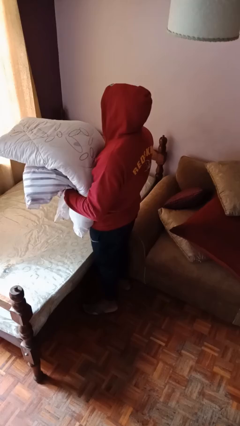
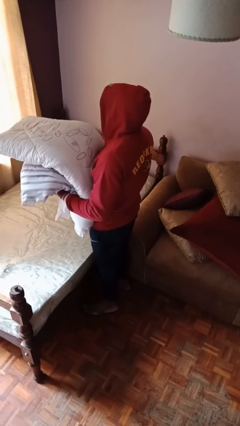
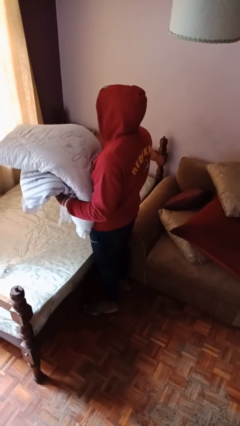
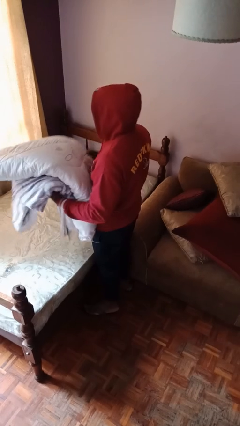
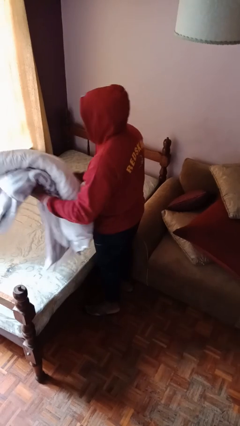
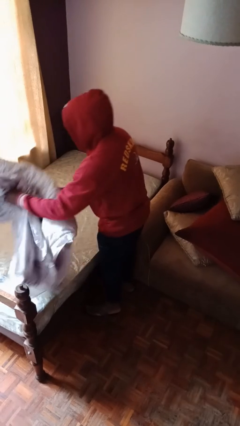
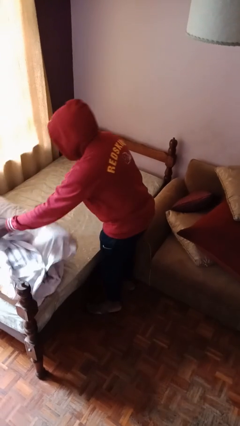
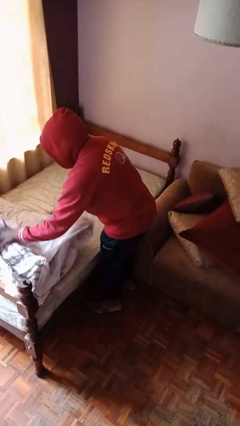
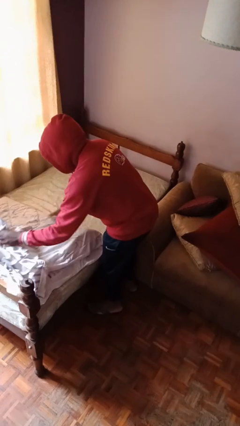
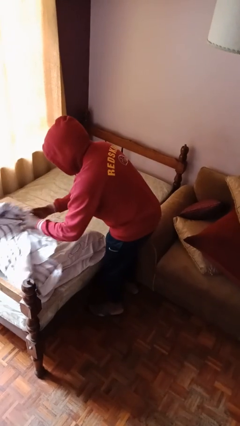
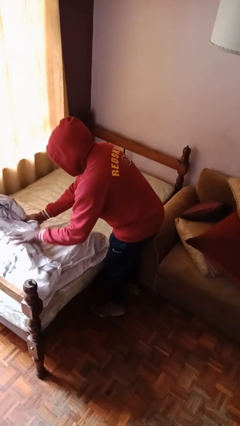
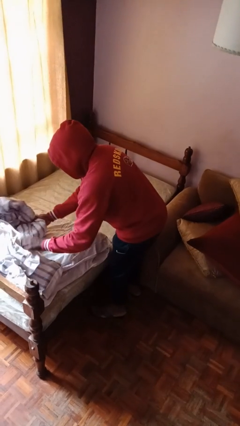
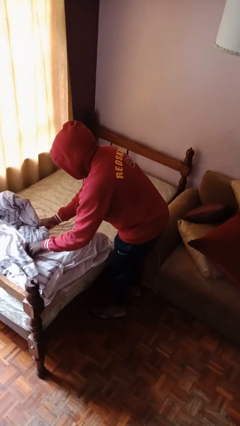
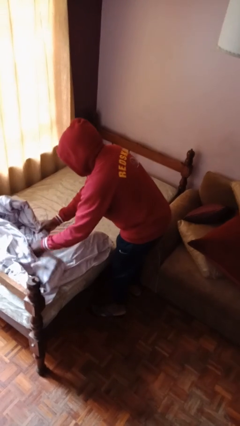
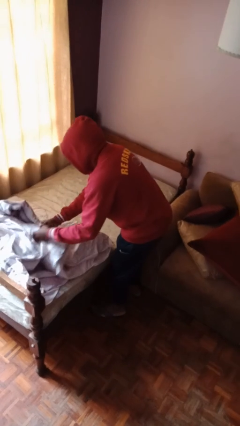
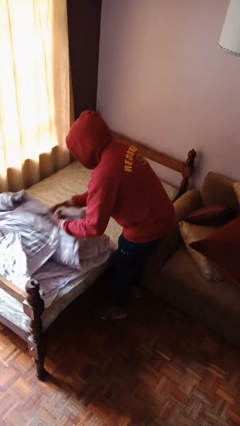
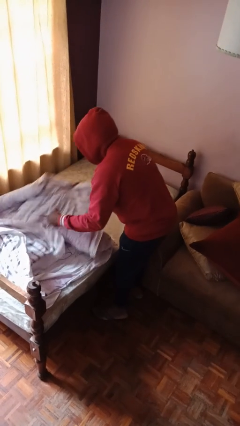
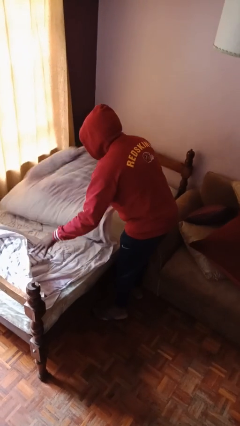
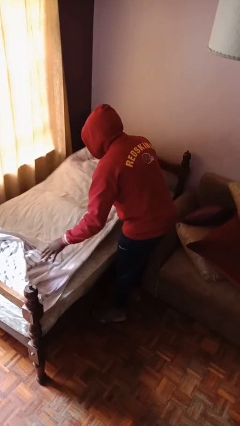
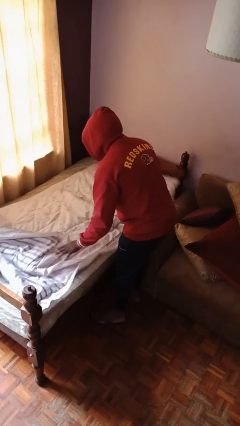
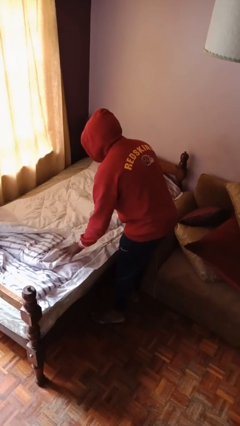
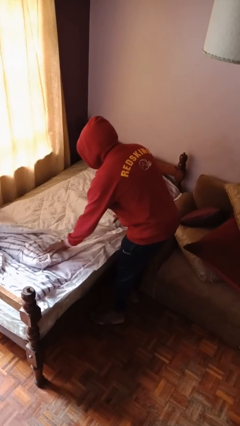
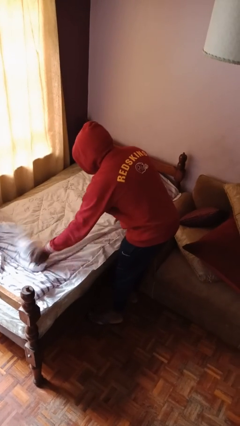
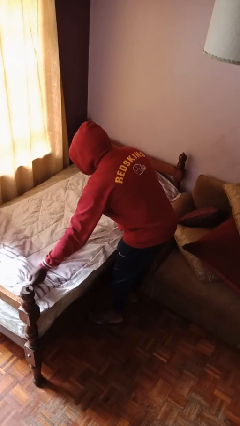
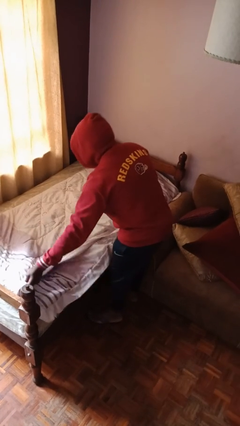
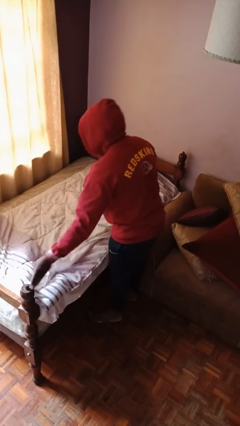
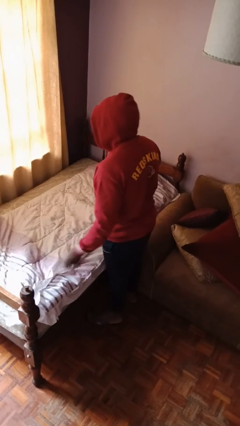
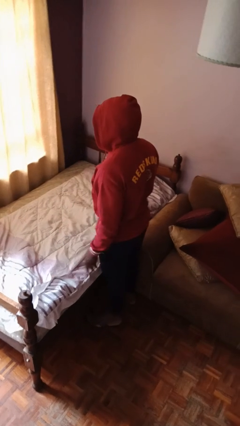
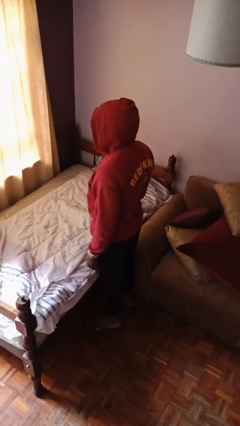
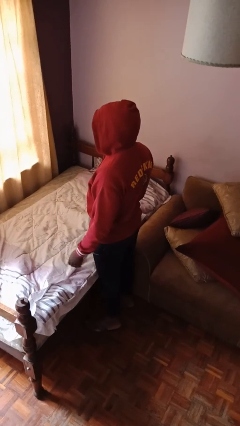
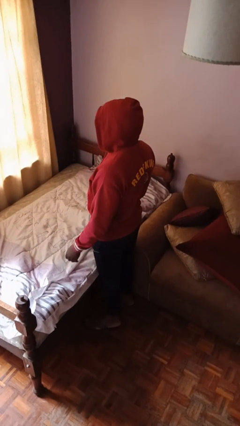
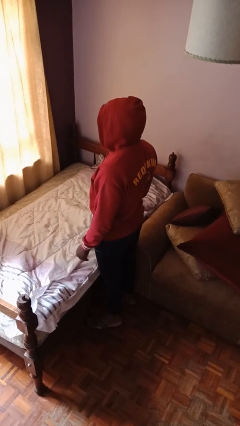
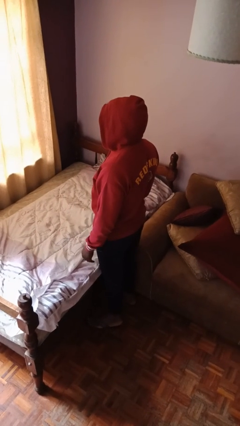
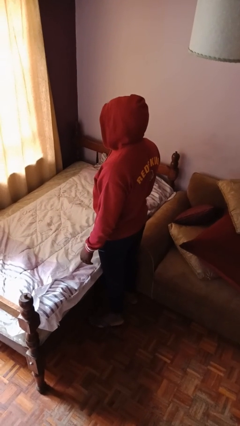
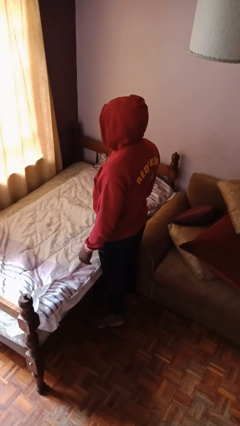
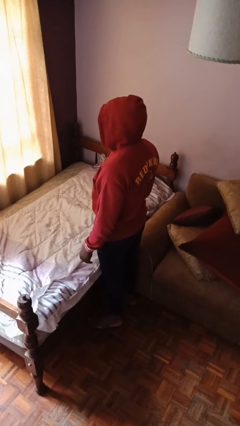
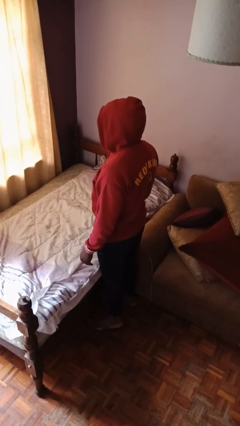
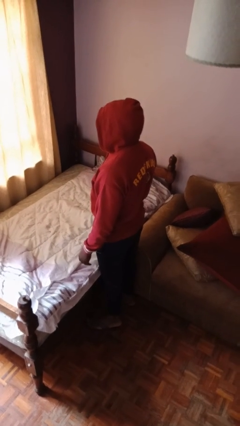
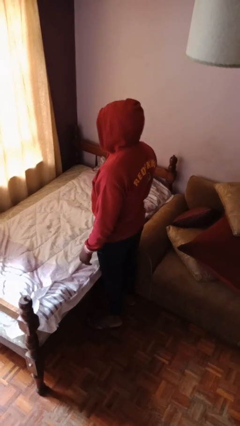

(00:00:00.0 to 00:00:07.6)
person unfolds blanket

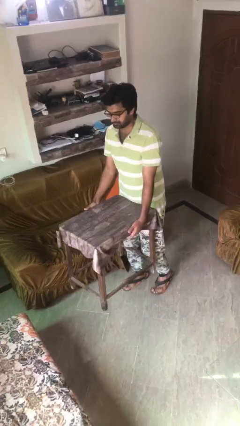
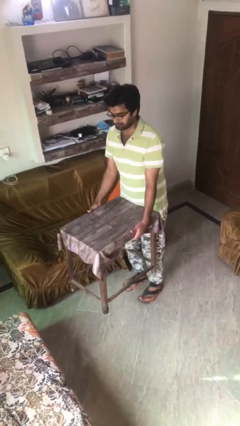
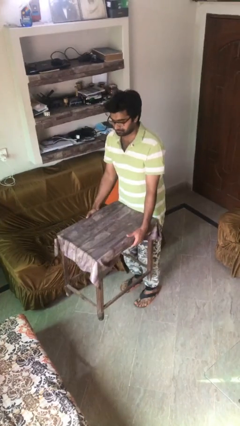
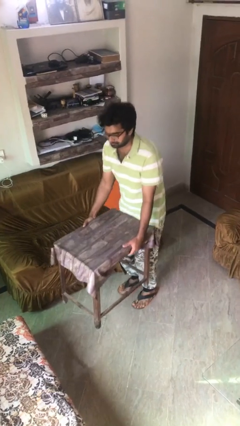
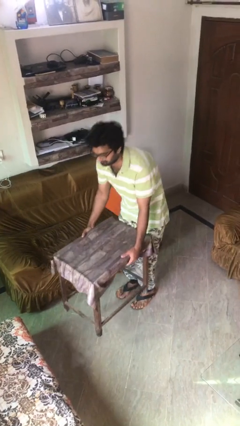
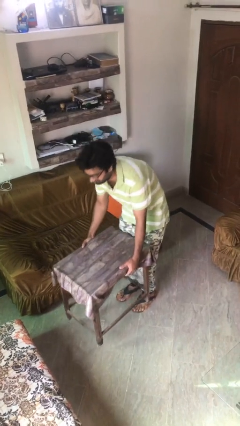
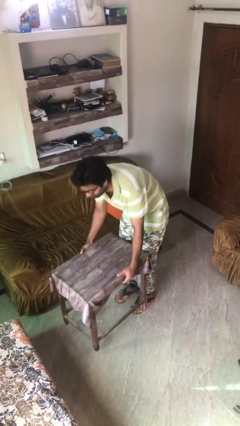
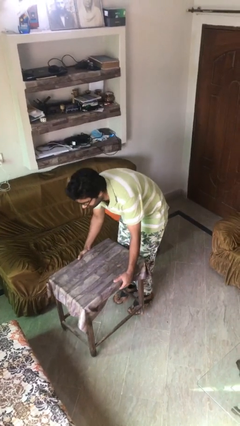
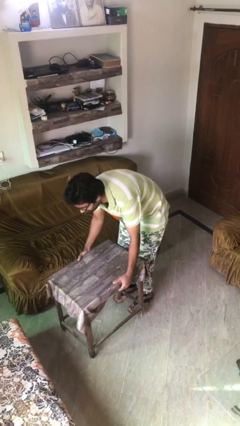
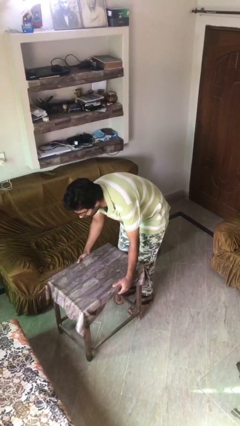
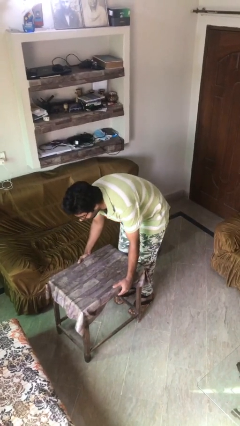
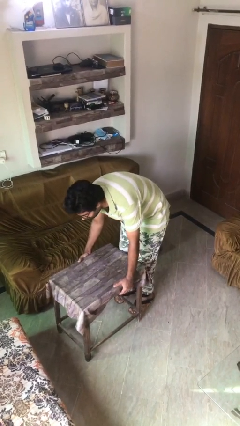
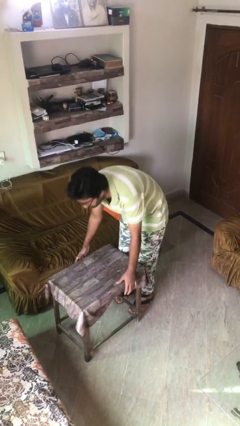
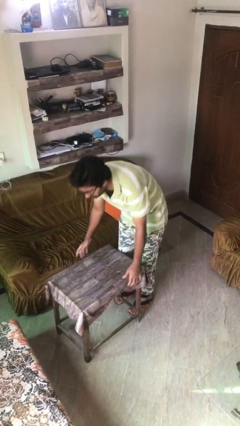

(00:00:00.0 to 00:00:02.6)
person puts down object on floor

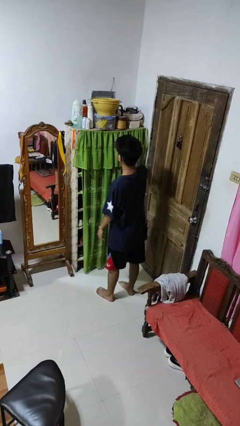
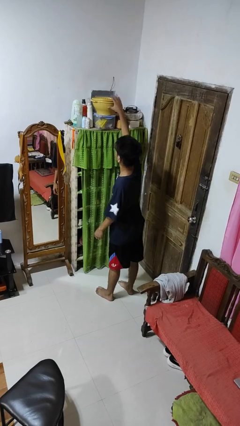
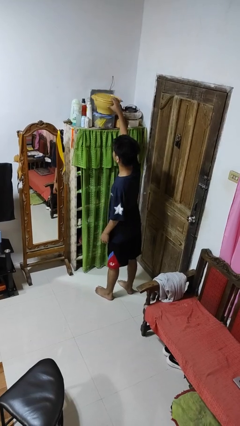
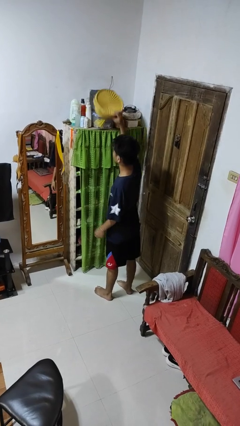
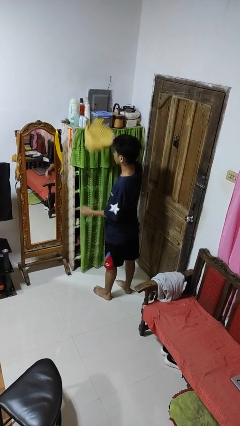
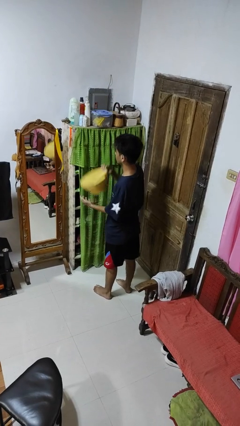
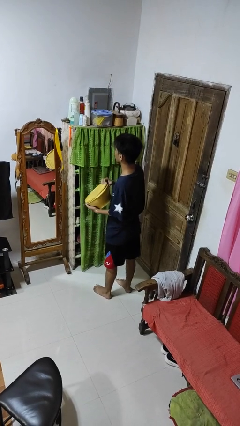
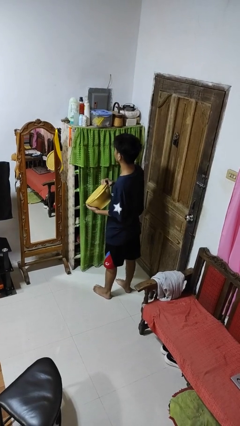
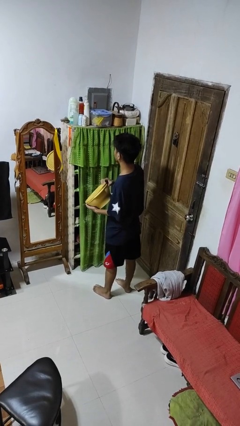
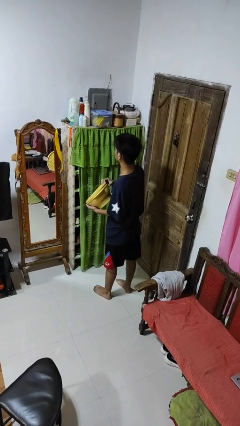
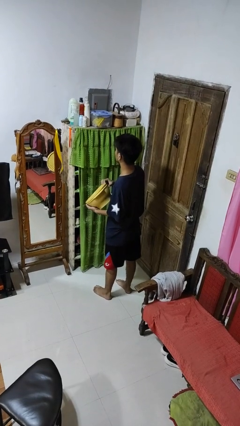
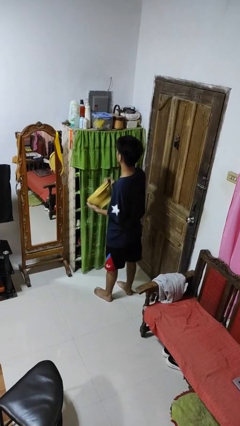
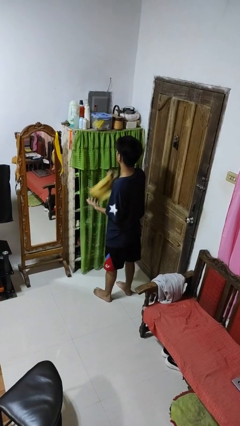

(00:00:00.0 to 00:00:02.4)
person picks up object from shelf

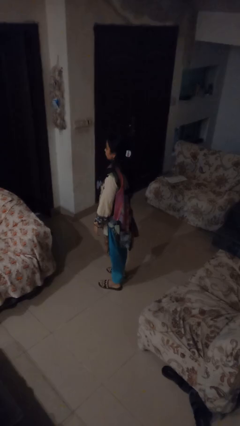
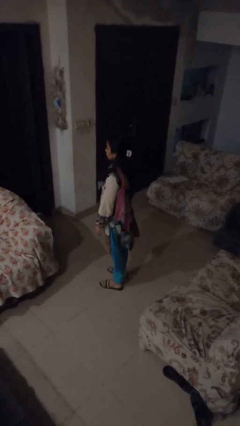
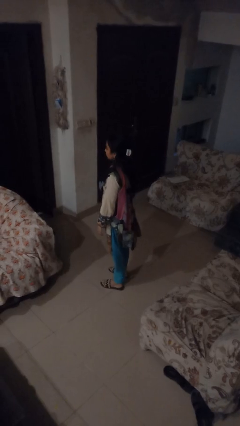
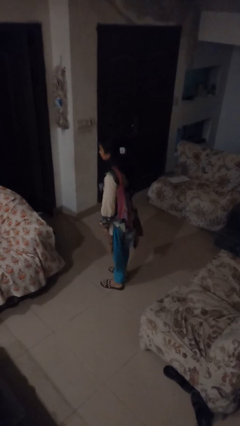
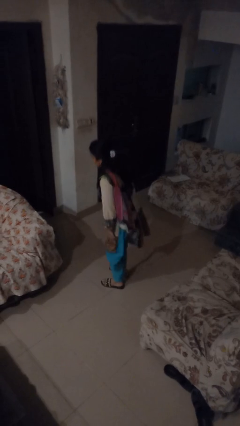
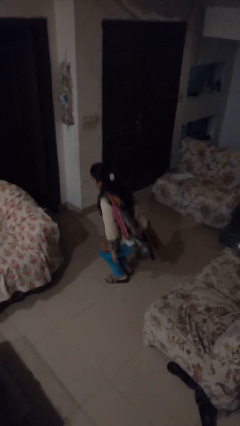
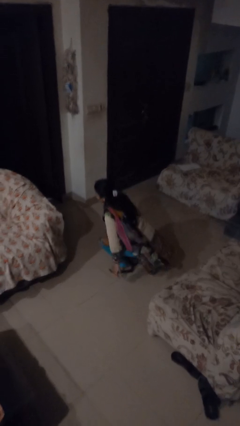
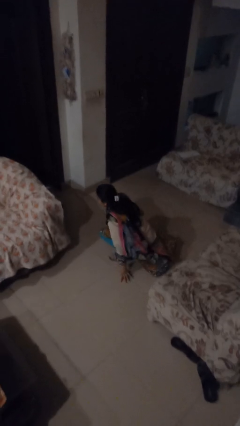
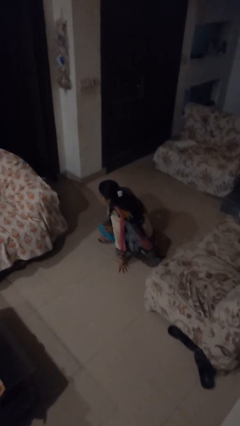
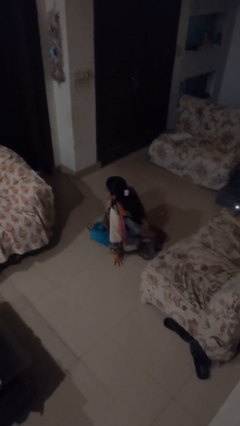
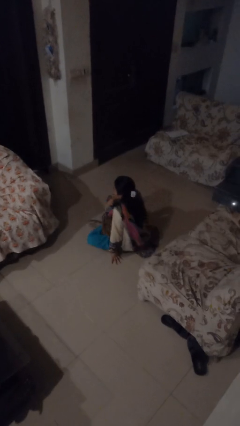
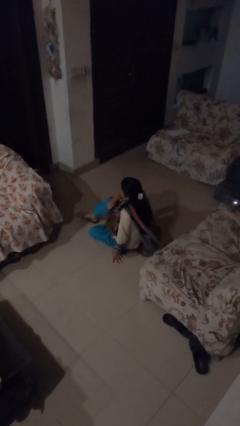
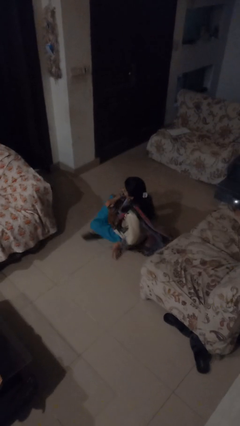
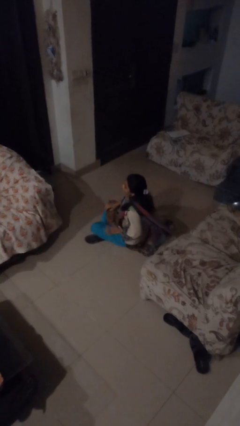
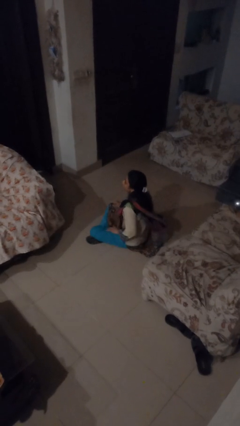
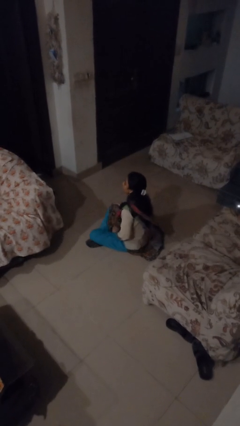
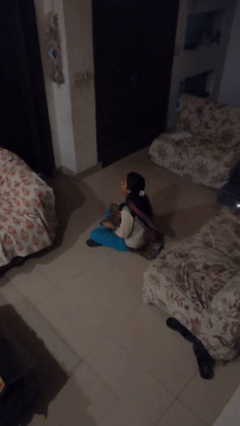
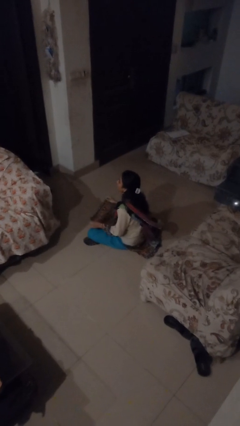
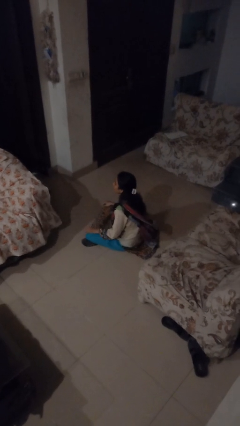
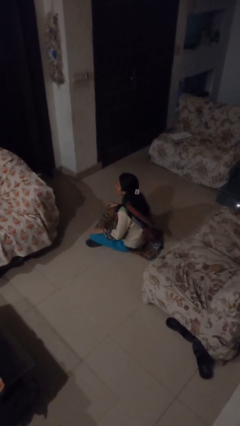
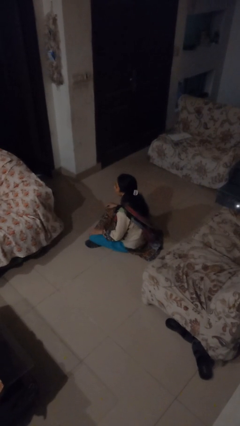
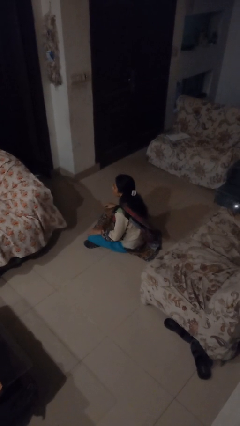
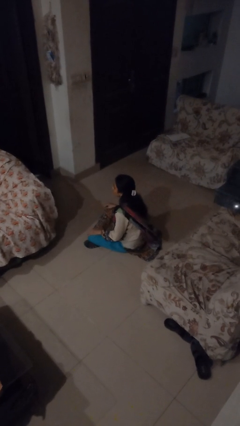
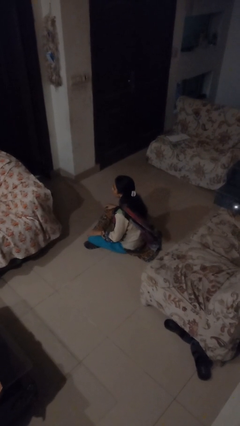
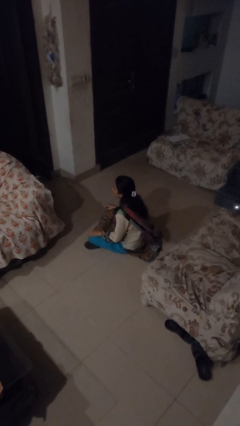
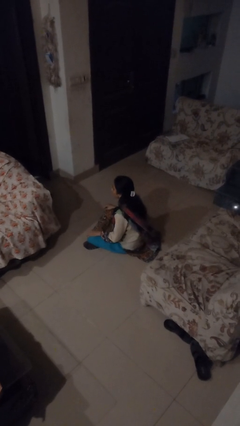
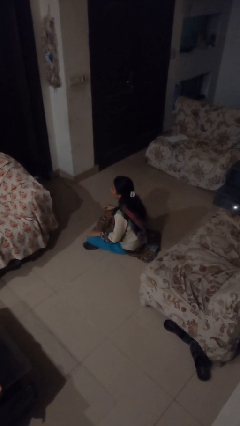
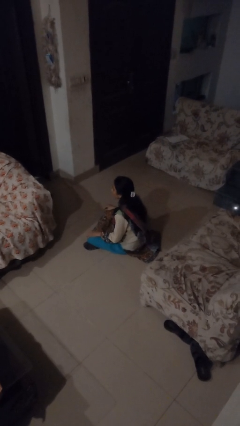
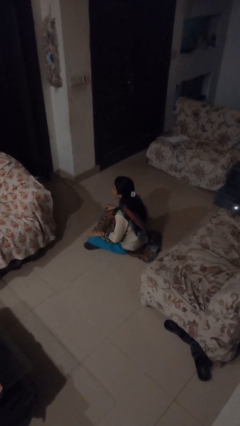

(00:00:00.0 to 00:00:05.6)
person sits crisscross
